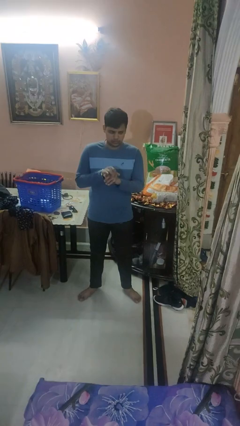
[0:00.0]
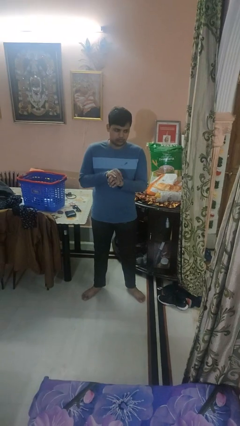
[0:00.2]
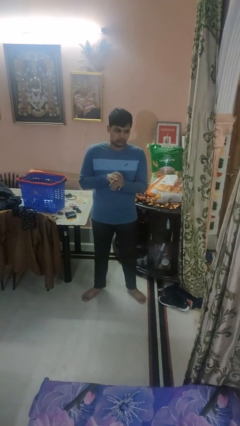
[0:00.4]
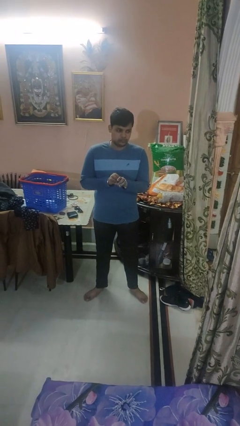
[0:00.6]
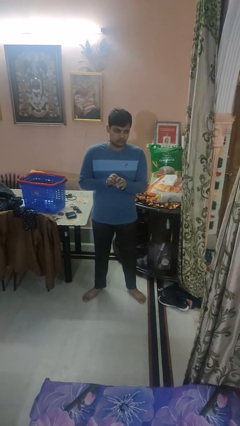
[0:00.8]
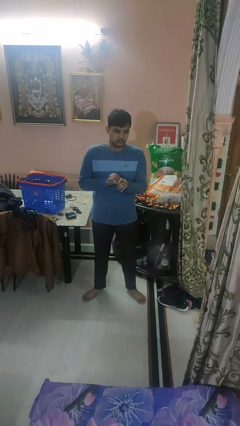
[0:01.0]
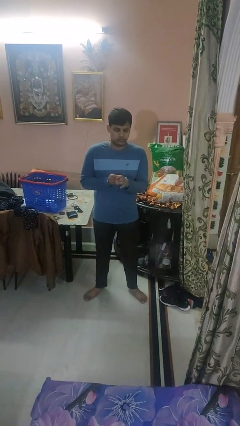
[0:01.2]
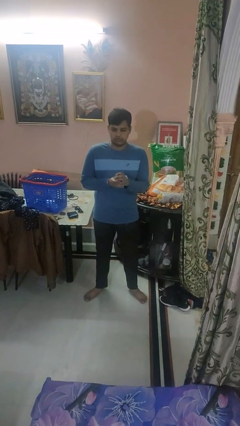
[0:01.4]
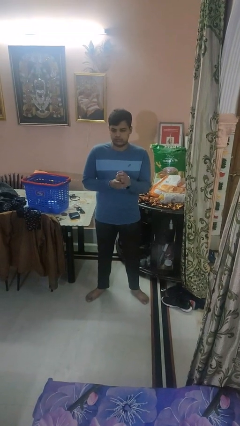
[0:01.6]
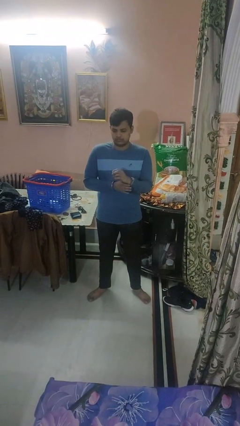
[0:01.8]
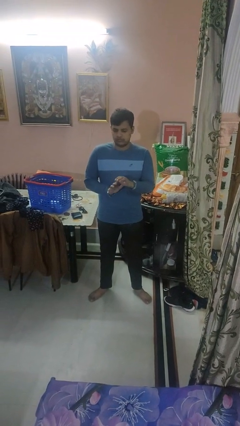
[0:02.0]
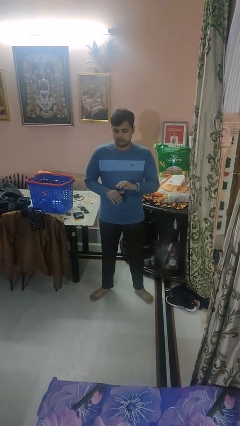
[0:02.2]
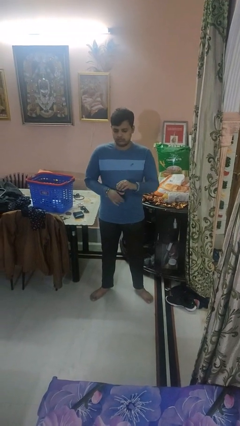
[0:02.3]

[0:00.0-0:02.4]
person puts on wristwatch

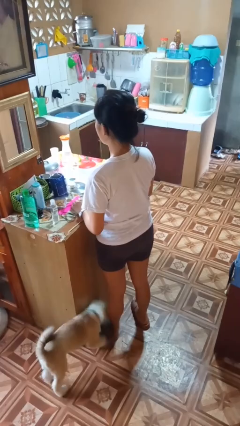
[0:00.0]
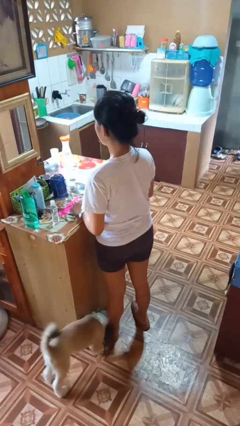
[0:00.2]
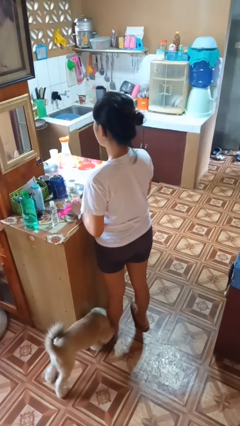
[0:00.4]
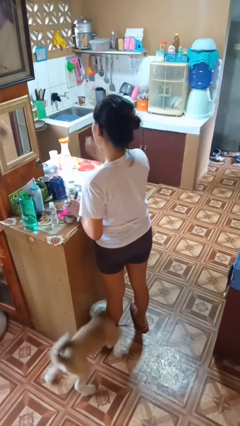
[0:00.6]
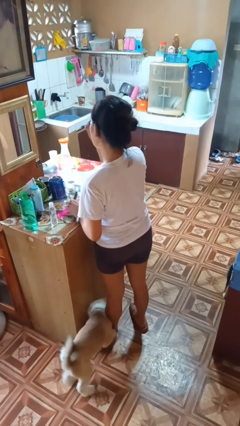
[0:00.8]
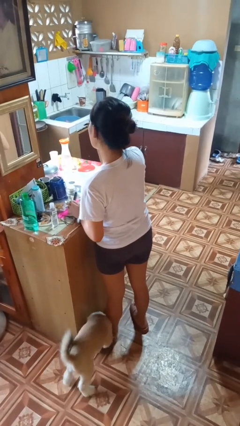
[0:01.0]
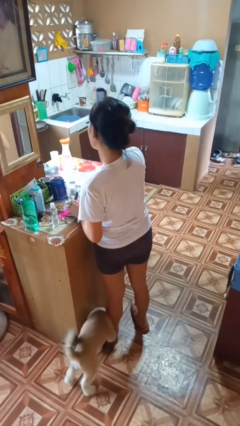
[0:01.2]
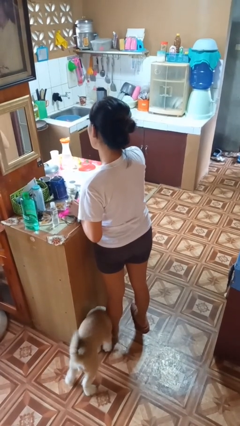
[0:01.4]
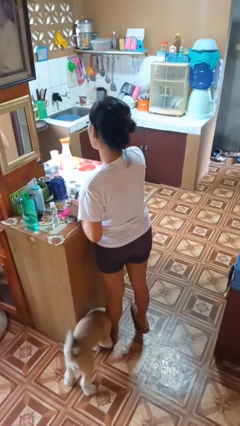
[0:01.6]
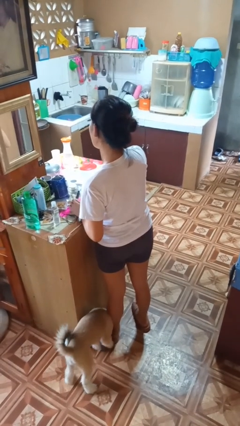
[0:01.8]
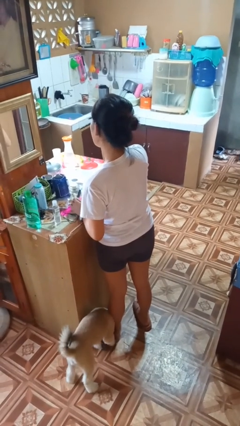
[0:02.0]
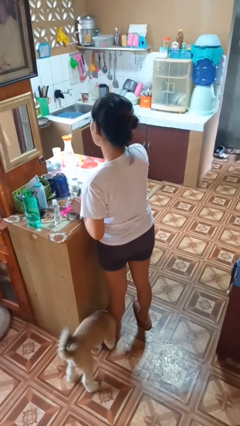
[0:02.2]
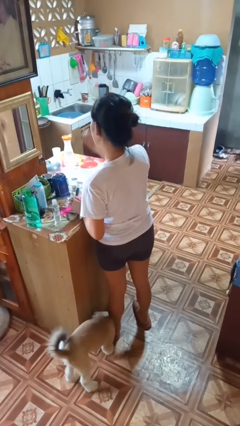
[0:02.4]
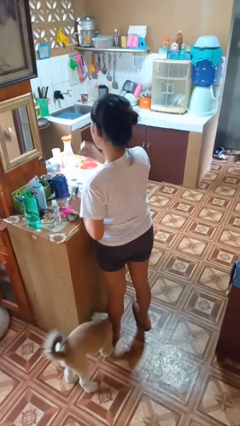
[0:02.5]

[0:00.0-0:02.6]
person applies eye makeup

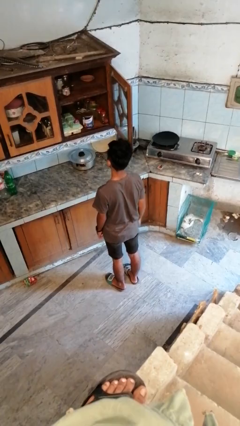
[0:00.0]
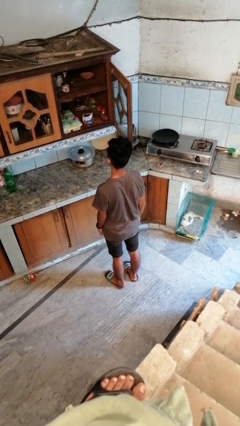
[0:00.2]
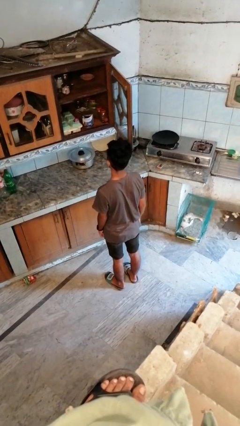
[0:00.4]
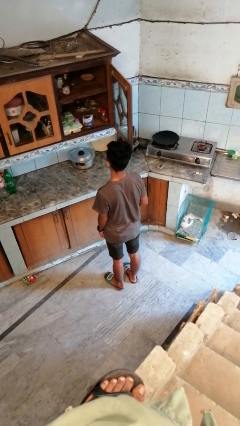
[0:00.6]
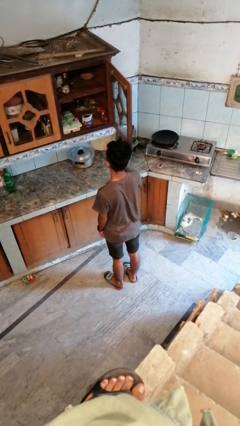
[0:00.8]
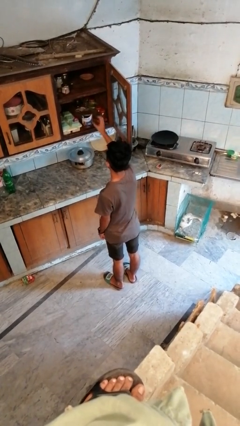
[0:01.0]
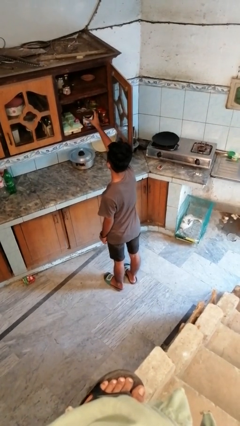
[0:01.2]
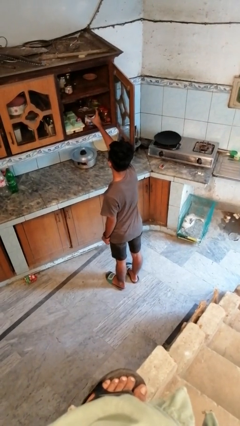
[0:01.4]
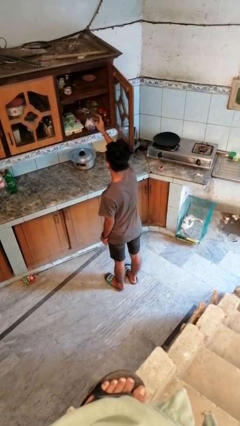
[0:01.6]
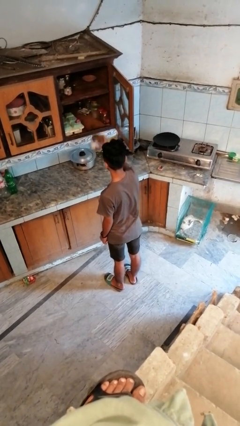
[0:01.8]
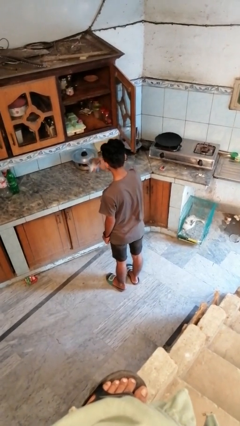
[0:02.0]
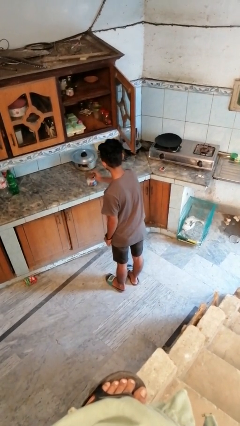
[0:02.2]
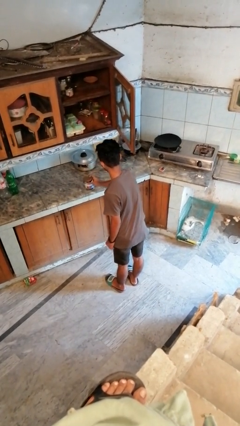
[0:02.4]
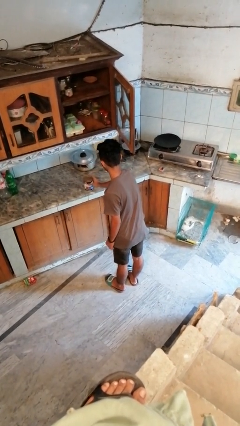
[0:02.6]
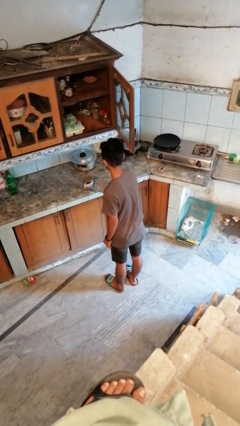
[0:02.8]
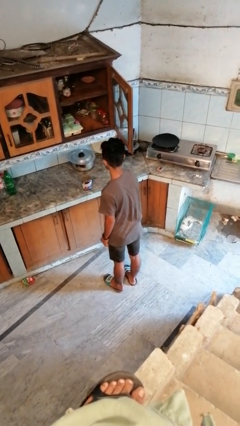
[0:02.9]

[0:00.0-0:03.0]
person takes object from cabinet

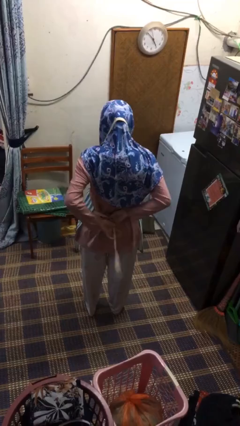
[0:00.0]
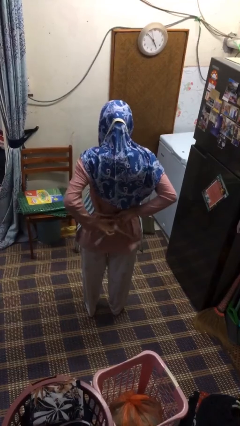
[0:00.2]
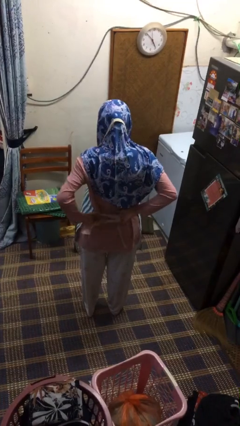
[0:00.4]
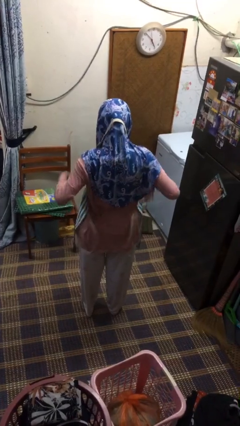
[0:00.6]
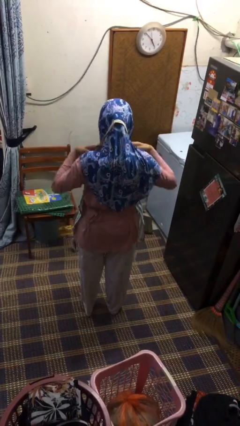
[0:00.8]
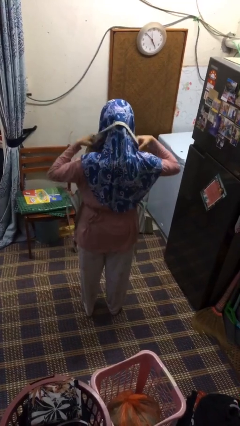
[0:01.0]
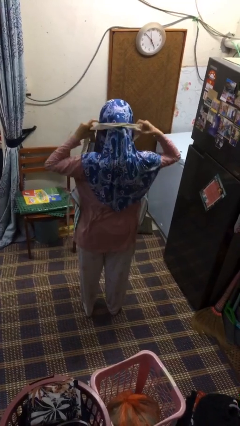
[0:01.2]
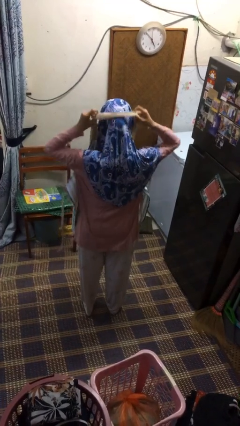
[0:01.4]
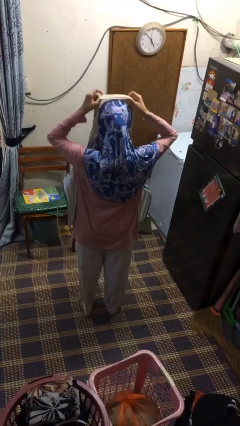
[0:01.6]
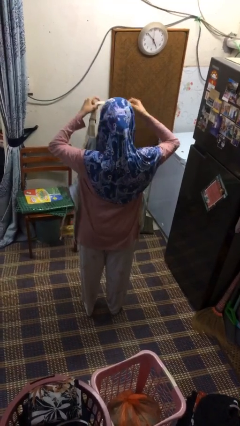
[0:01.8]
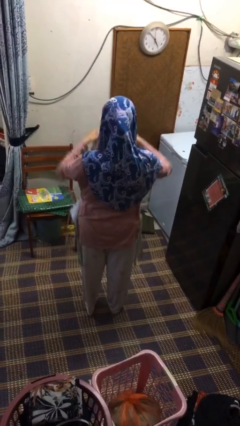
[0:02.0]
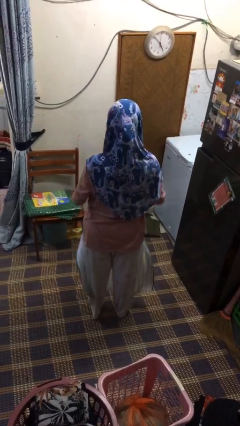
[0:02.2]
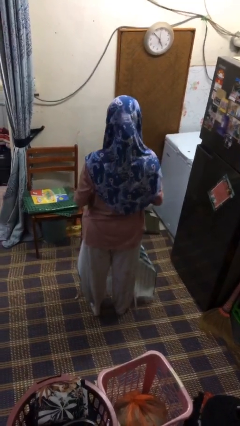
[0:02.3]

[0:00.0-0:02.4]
person takes off apron

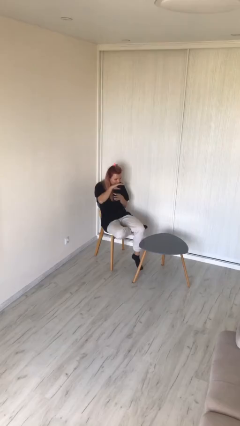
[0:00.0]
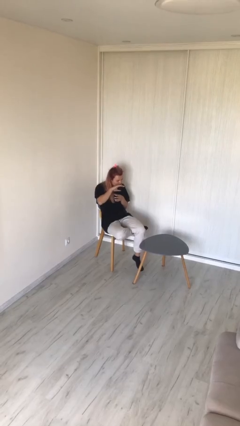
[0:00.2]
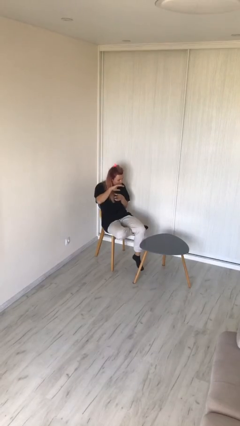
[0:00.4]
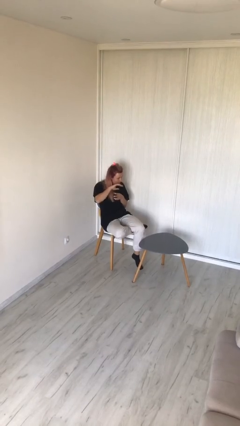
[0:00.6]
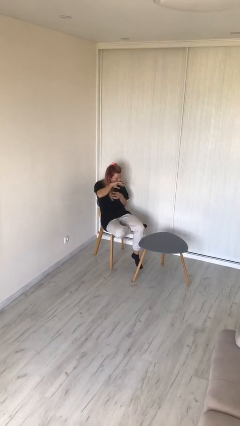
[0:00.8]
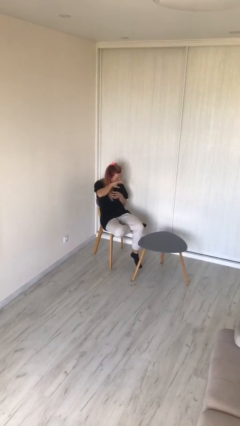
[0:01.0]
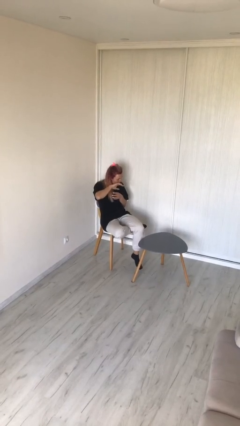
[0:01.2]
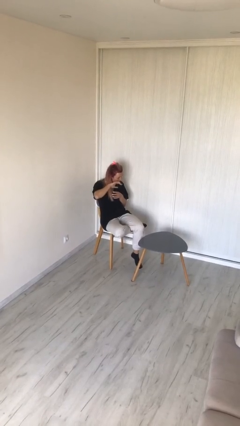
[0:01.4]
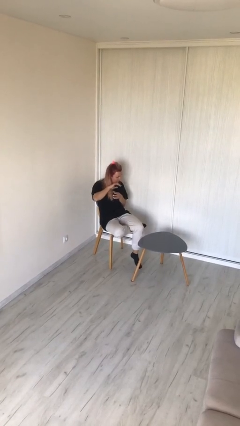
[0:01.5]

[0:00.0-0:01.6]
person licks fingers

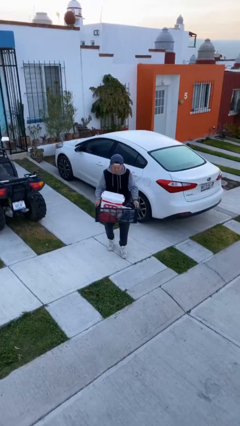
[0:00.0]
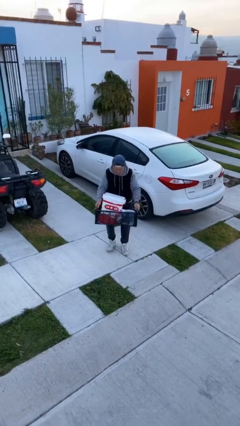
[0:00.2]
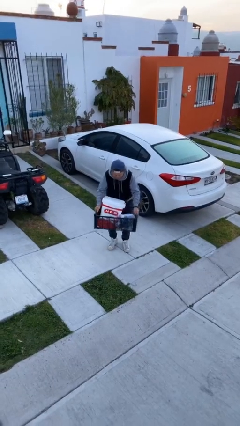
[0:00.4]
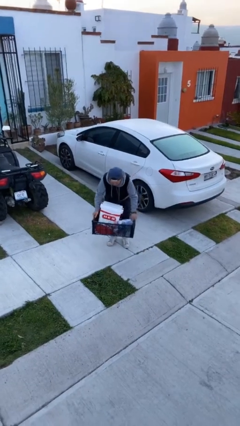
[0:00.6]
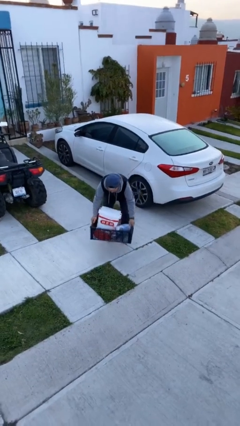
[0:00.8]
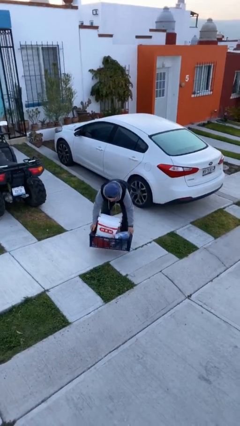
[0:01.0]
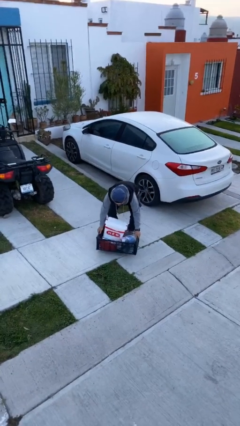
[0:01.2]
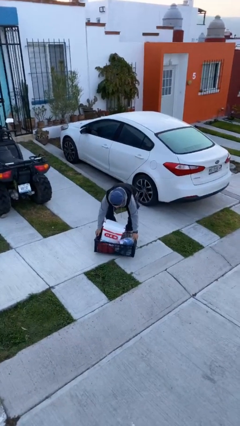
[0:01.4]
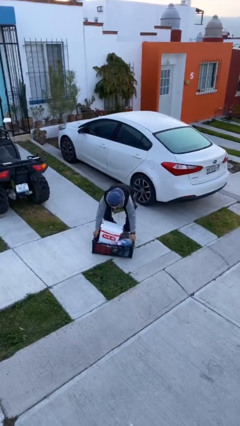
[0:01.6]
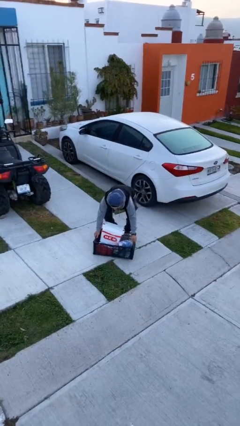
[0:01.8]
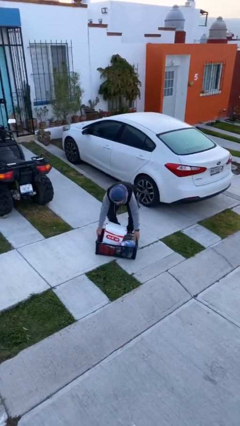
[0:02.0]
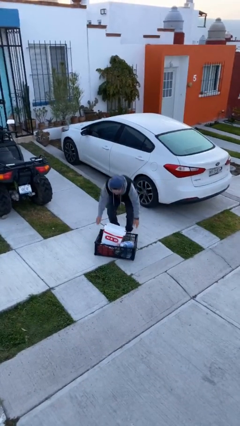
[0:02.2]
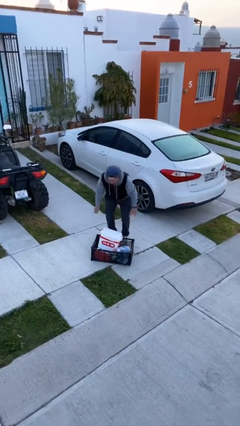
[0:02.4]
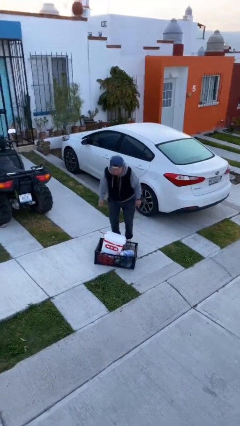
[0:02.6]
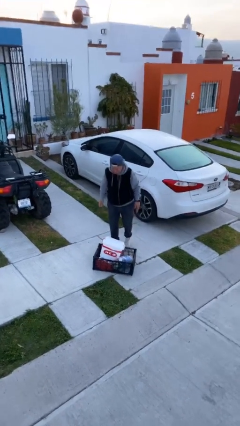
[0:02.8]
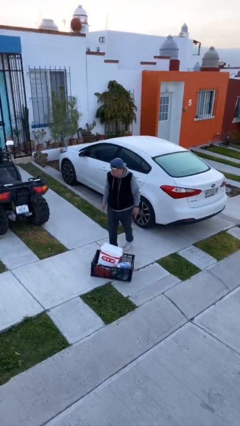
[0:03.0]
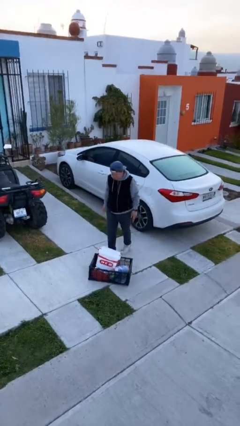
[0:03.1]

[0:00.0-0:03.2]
person puts down object on floor

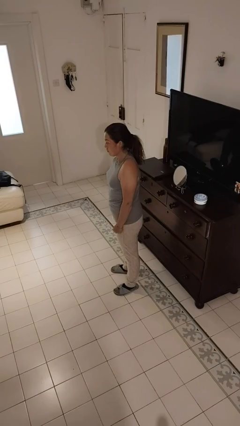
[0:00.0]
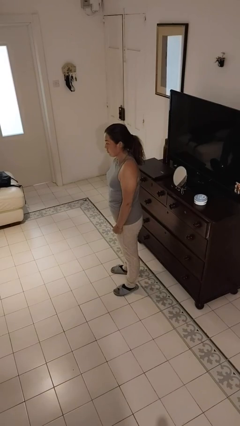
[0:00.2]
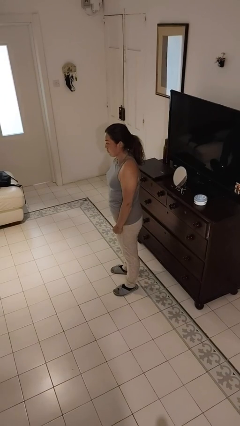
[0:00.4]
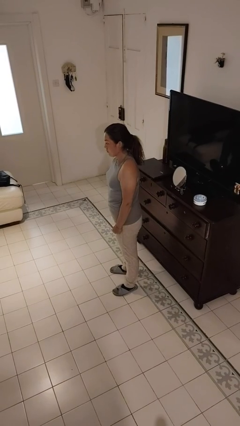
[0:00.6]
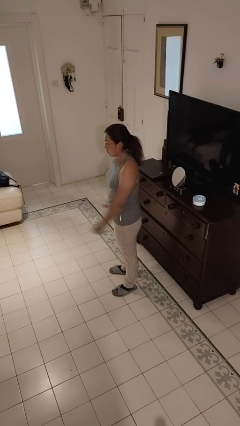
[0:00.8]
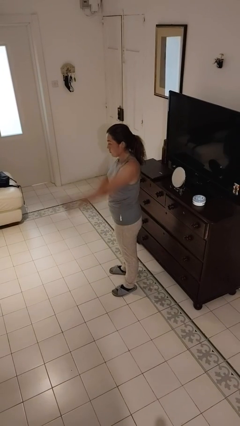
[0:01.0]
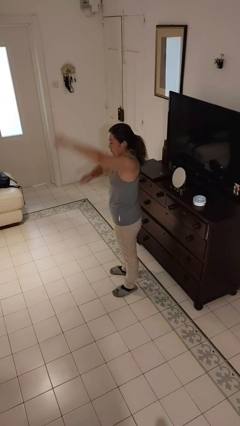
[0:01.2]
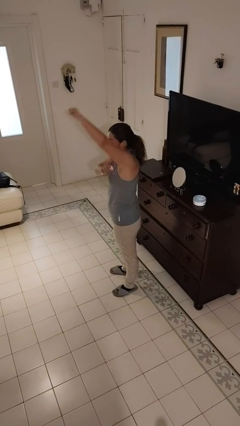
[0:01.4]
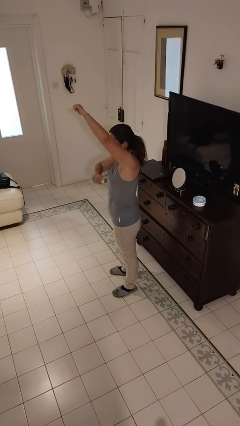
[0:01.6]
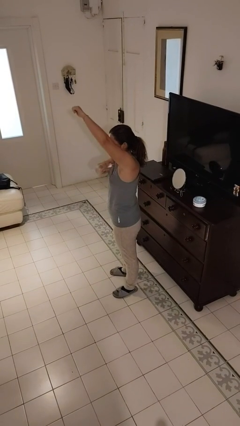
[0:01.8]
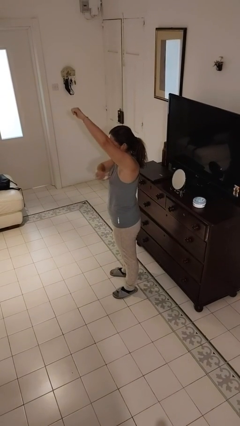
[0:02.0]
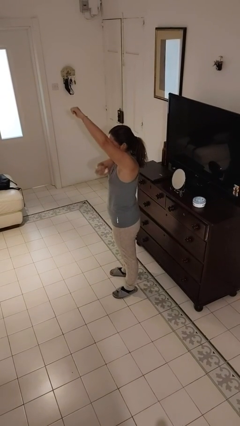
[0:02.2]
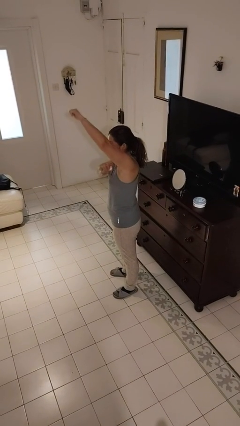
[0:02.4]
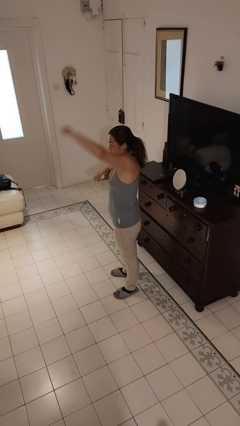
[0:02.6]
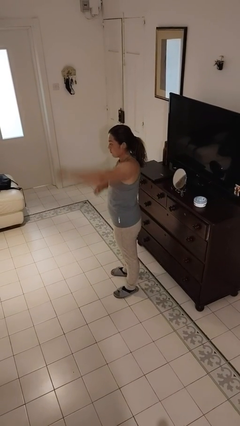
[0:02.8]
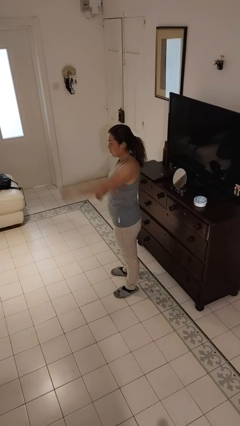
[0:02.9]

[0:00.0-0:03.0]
person applies deodorant
